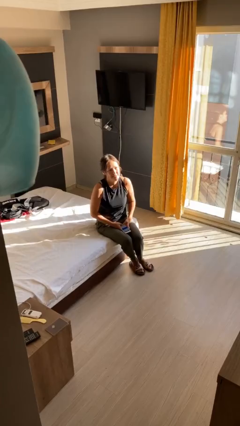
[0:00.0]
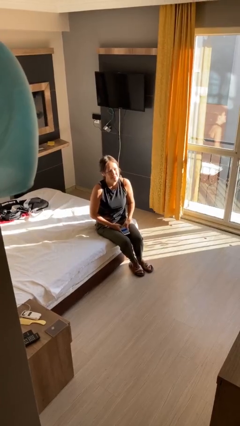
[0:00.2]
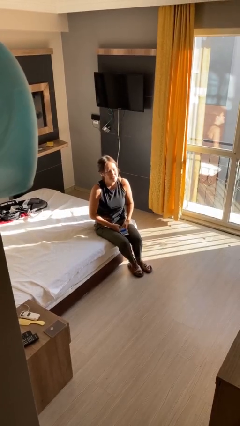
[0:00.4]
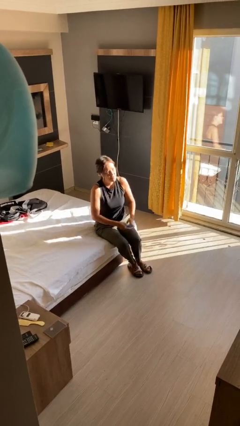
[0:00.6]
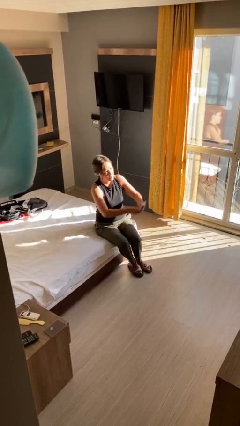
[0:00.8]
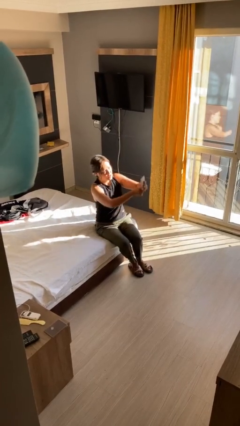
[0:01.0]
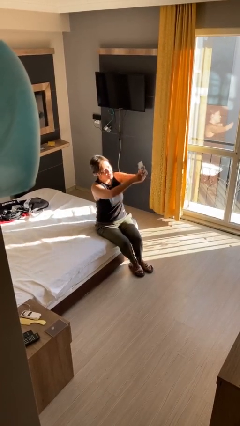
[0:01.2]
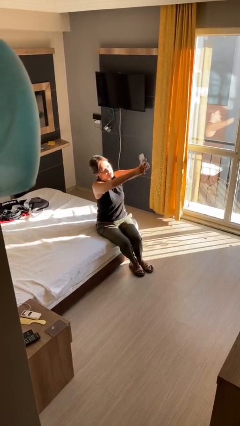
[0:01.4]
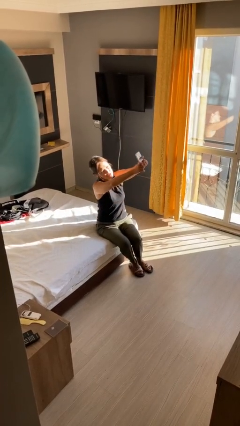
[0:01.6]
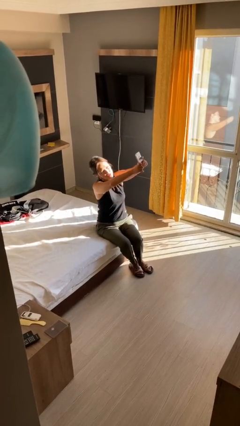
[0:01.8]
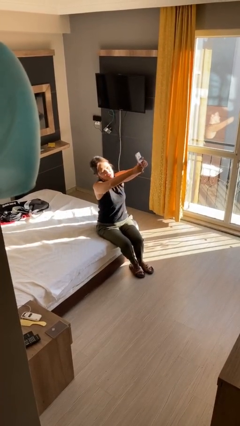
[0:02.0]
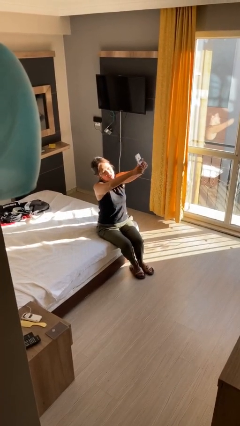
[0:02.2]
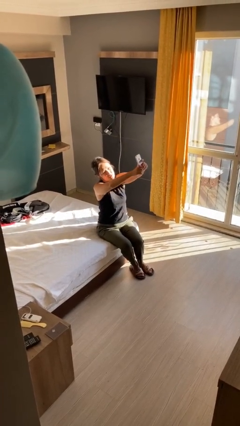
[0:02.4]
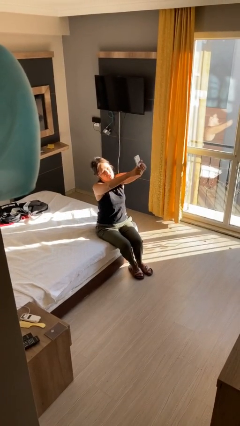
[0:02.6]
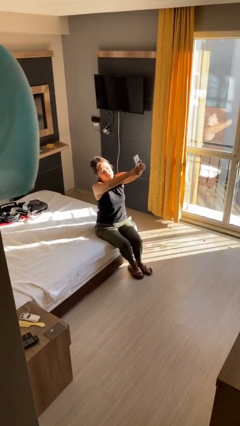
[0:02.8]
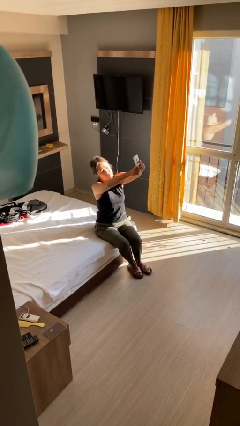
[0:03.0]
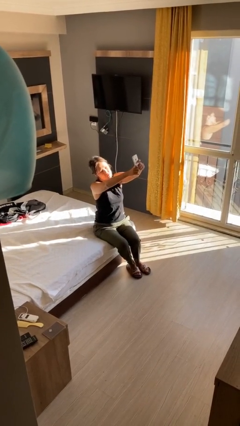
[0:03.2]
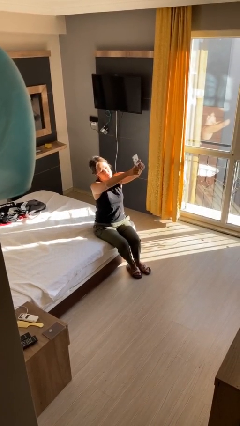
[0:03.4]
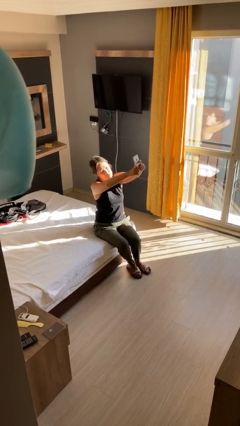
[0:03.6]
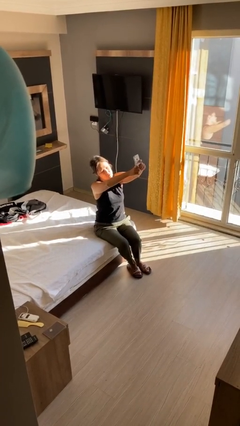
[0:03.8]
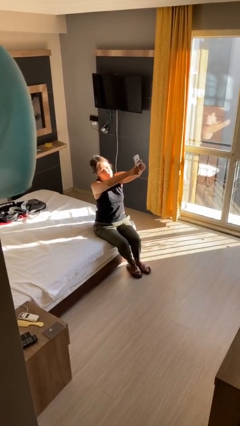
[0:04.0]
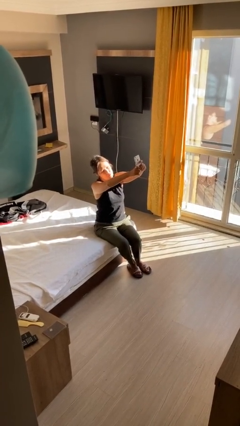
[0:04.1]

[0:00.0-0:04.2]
person takes selfie

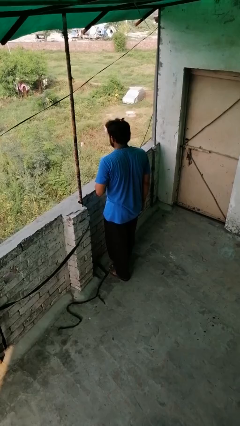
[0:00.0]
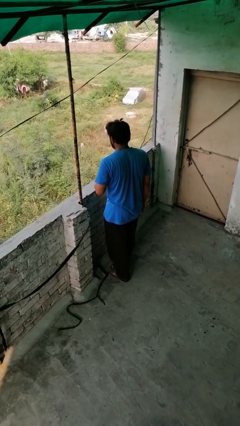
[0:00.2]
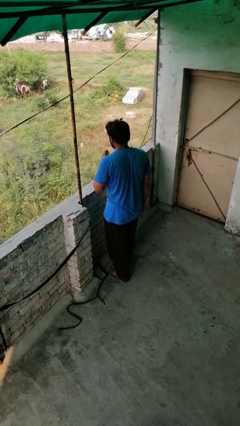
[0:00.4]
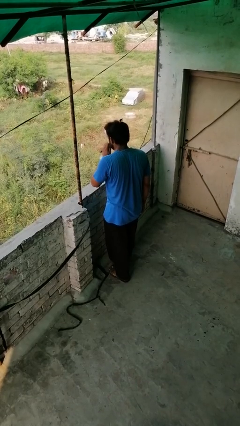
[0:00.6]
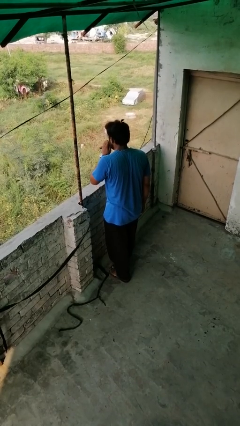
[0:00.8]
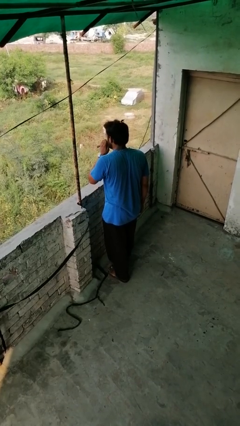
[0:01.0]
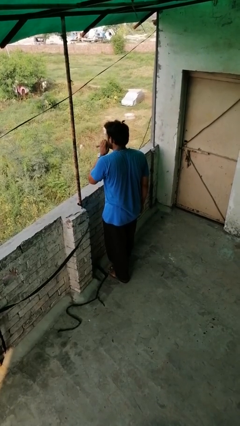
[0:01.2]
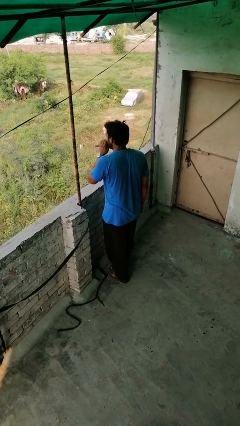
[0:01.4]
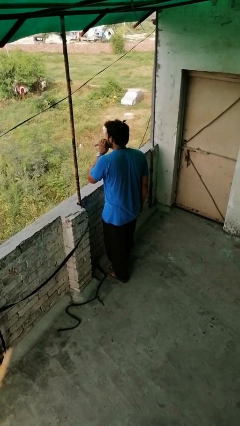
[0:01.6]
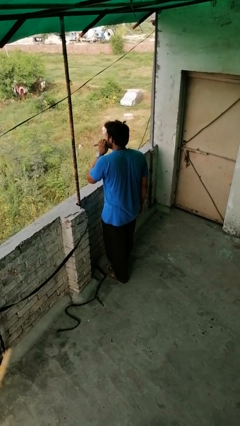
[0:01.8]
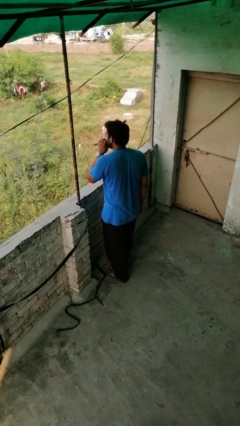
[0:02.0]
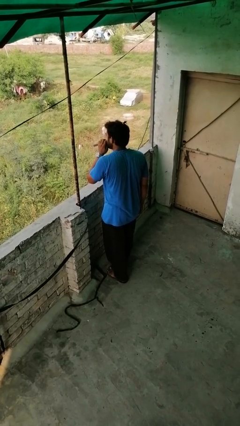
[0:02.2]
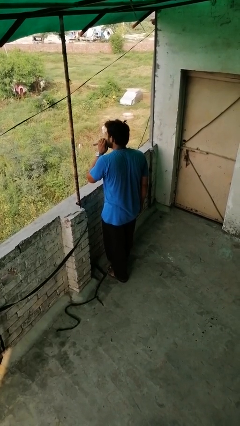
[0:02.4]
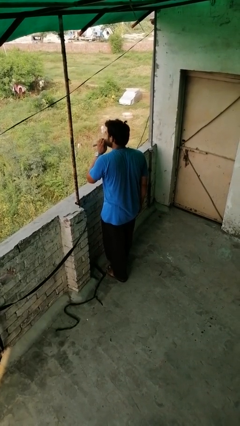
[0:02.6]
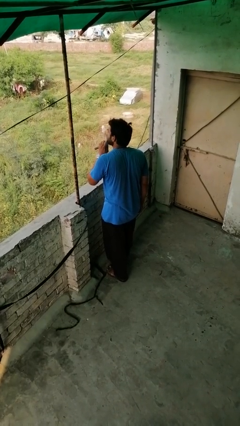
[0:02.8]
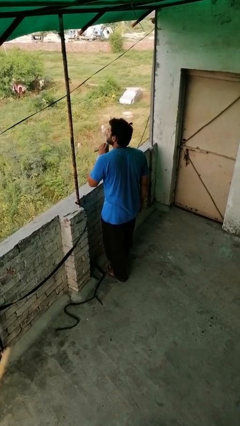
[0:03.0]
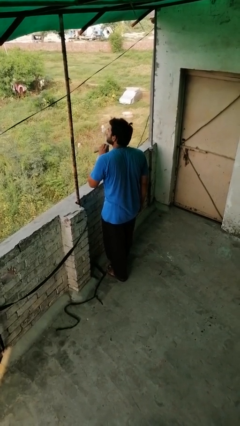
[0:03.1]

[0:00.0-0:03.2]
person vapes

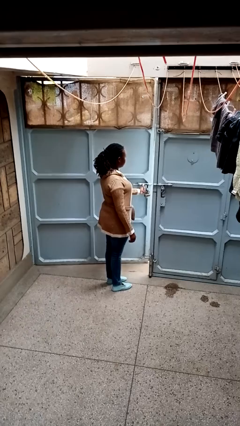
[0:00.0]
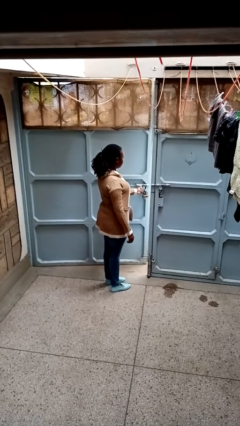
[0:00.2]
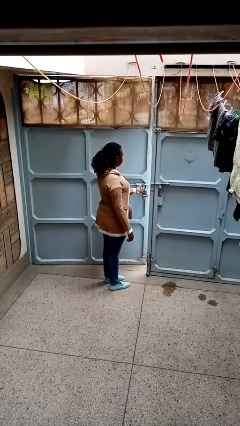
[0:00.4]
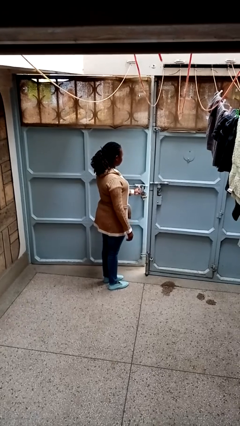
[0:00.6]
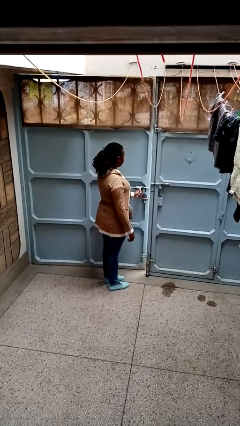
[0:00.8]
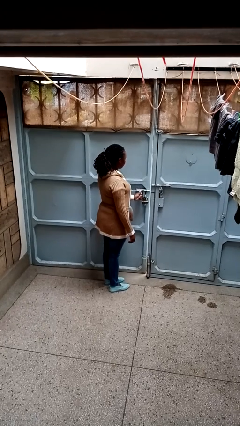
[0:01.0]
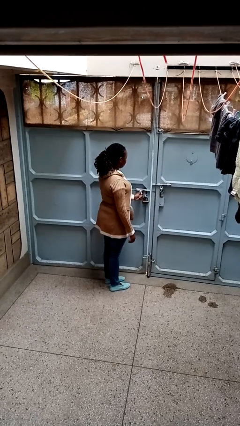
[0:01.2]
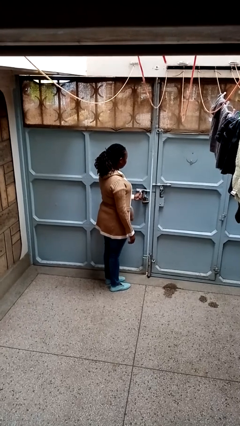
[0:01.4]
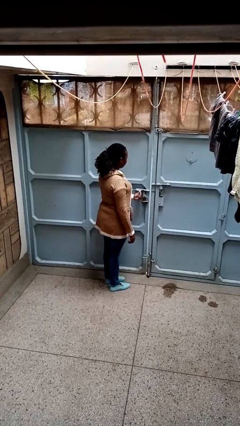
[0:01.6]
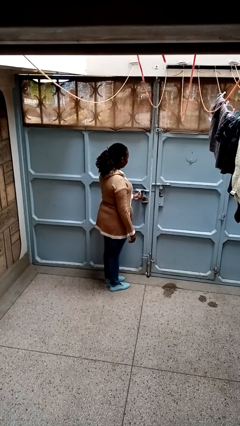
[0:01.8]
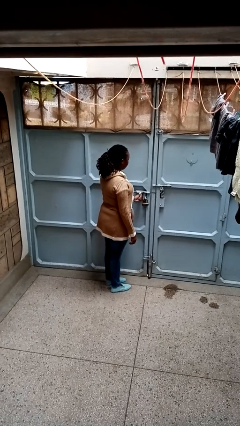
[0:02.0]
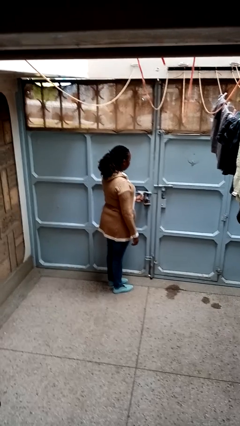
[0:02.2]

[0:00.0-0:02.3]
person closes gate

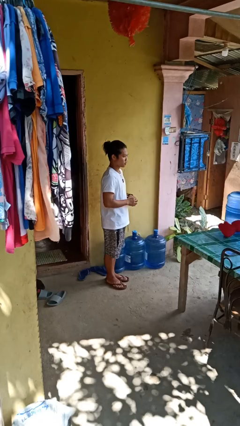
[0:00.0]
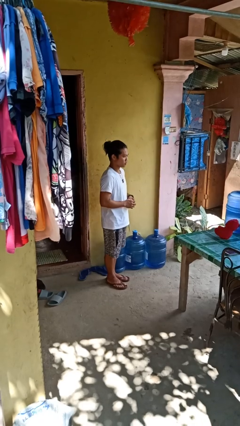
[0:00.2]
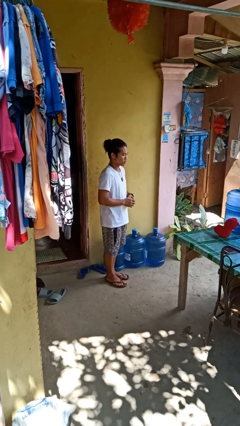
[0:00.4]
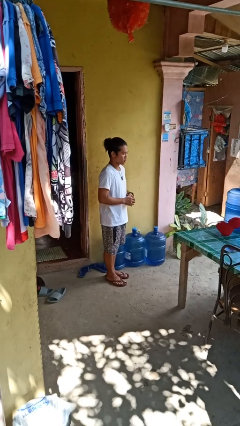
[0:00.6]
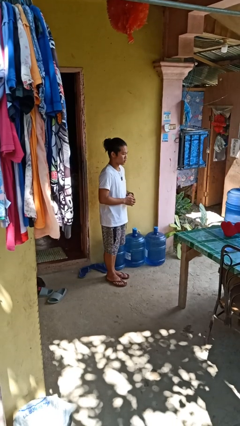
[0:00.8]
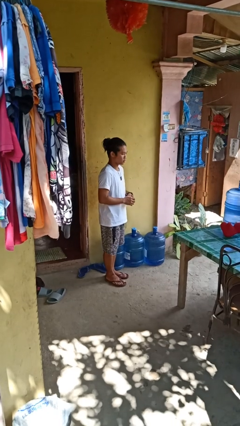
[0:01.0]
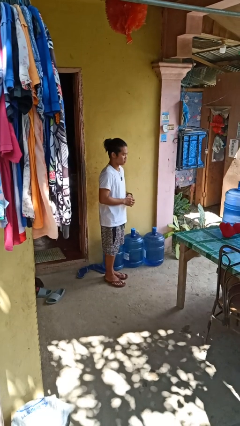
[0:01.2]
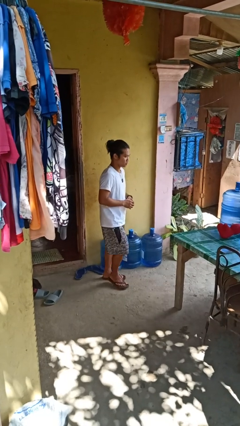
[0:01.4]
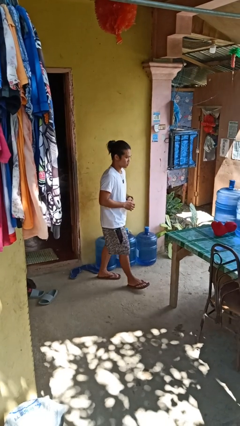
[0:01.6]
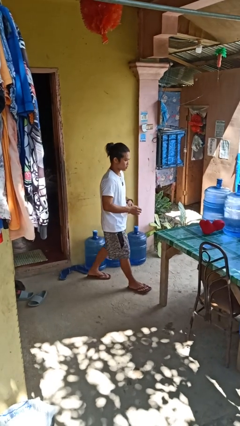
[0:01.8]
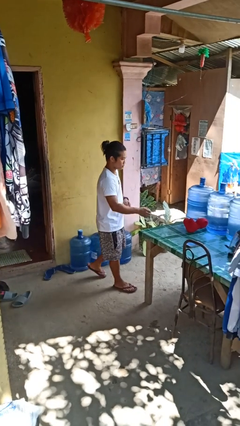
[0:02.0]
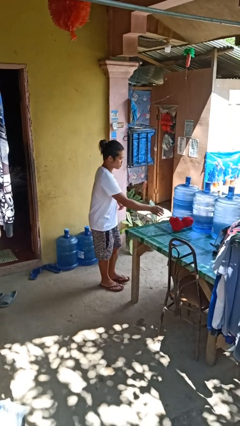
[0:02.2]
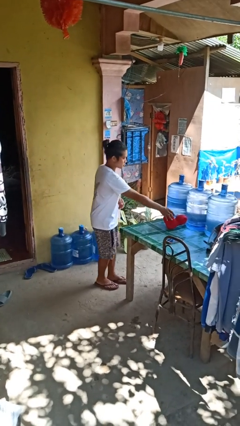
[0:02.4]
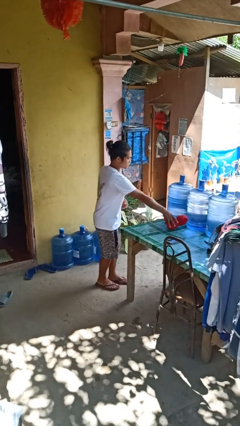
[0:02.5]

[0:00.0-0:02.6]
person throws object on table

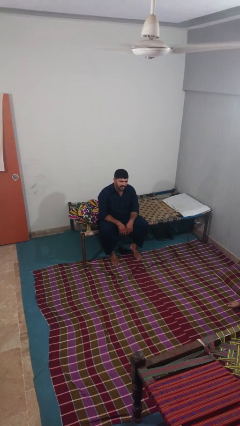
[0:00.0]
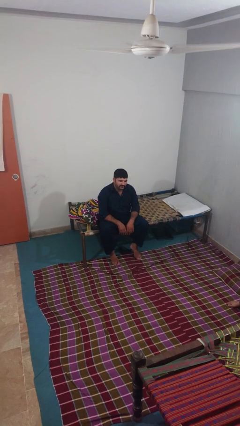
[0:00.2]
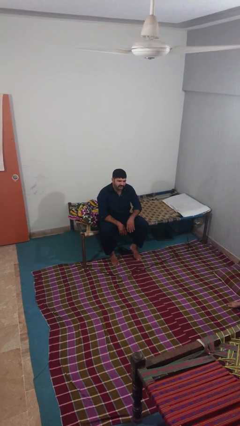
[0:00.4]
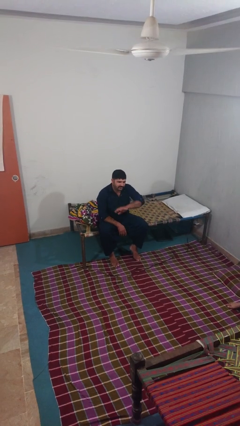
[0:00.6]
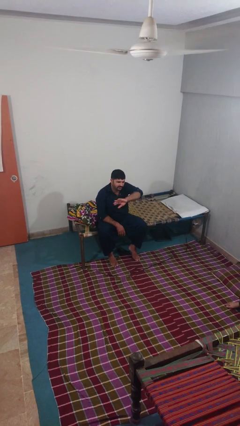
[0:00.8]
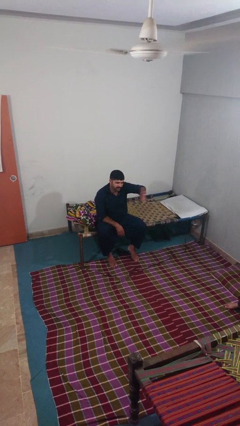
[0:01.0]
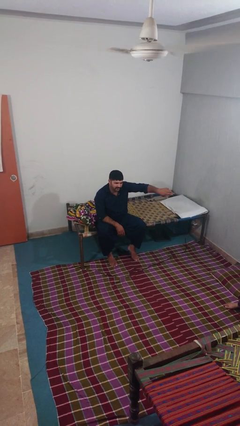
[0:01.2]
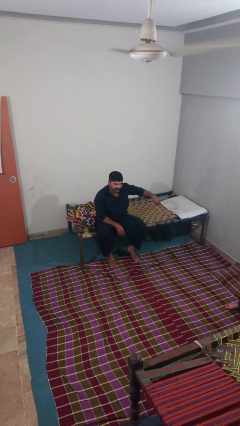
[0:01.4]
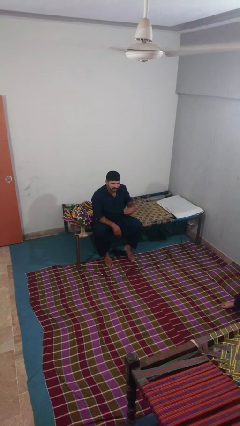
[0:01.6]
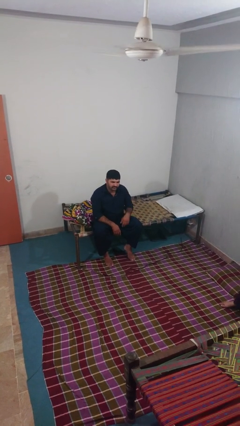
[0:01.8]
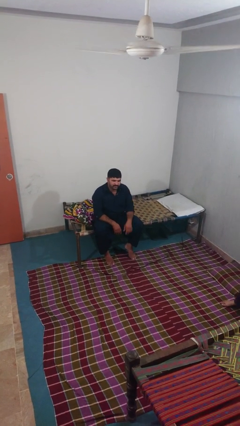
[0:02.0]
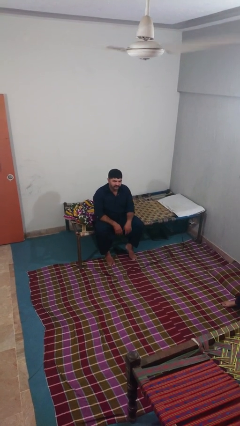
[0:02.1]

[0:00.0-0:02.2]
person gestures swipe left

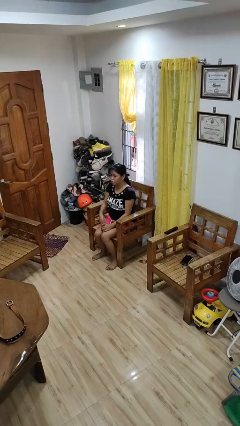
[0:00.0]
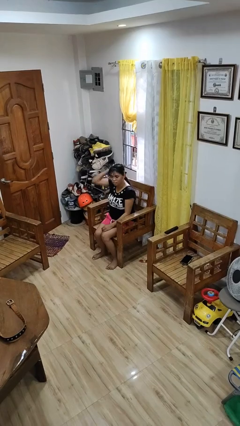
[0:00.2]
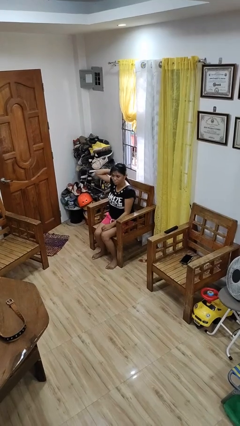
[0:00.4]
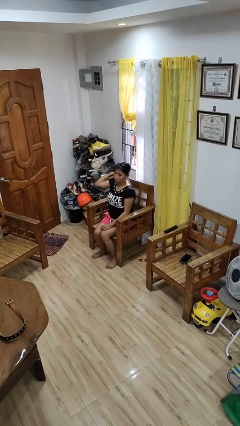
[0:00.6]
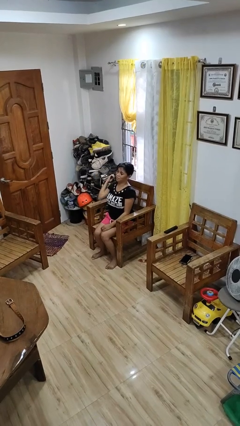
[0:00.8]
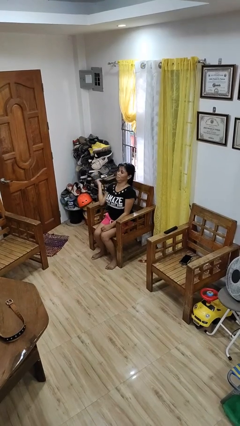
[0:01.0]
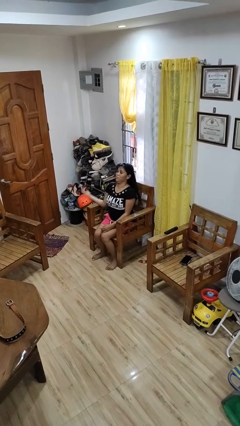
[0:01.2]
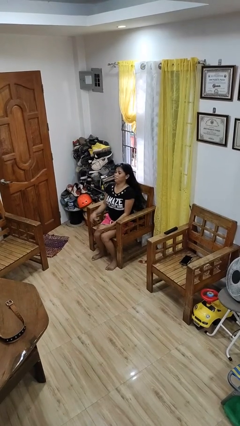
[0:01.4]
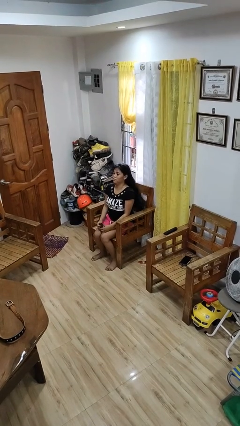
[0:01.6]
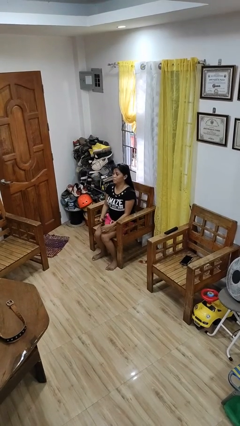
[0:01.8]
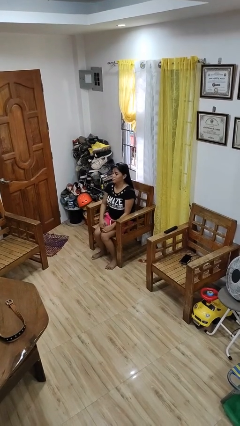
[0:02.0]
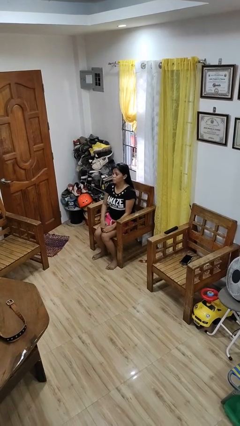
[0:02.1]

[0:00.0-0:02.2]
person takes off hairtie

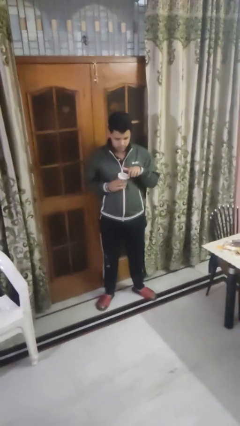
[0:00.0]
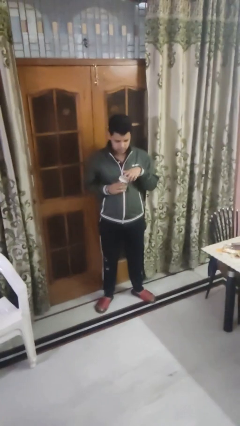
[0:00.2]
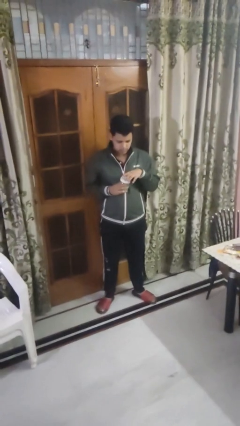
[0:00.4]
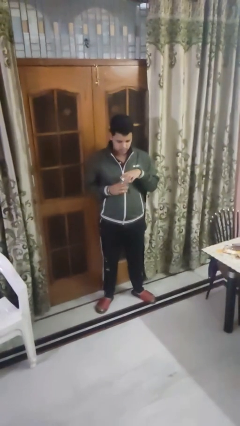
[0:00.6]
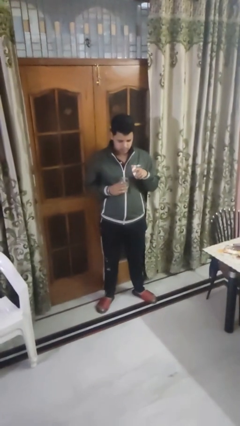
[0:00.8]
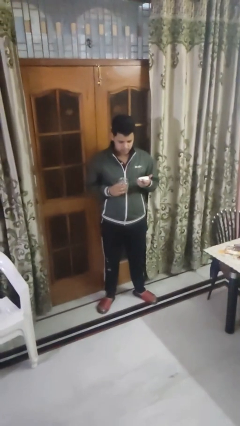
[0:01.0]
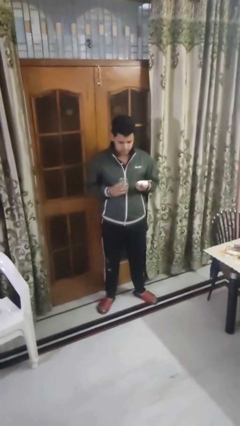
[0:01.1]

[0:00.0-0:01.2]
person opens jar
